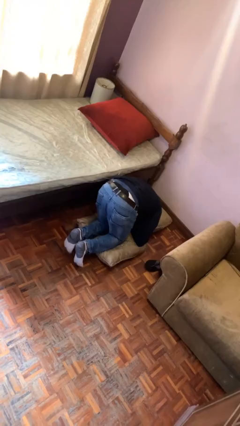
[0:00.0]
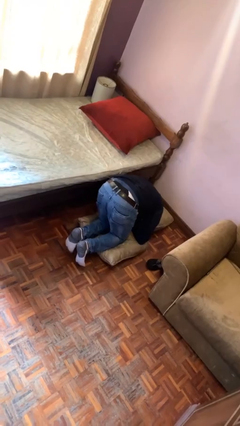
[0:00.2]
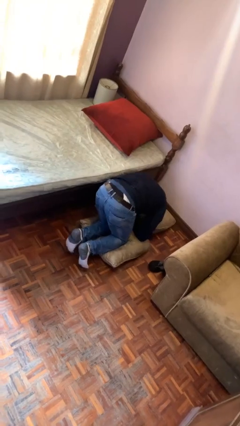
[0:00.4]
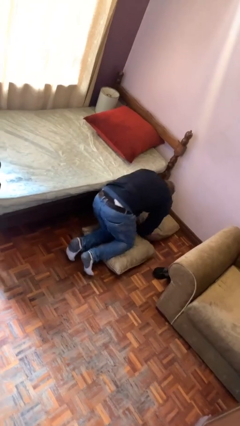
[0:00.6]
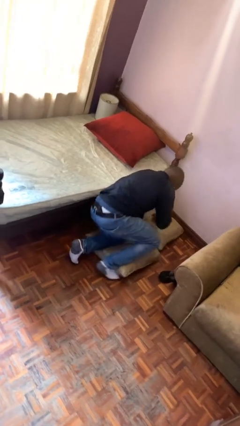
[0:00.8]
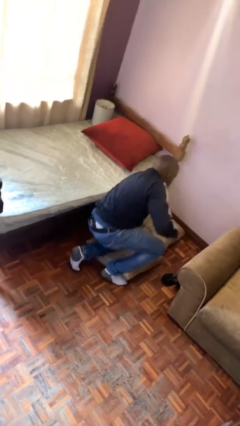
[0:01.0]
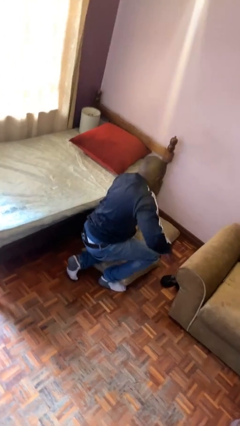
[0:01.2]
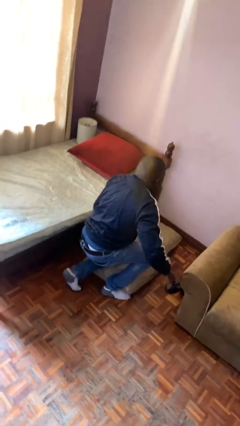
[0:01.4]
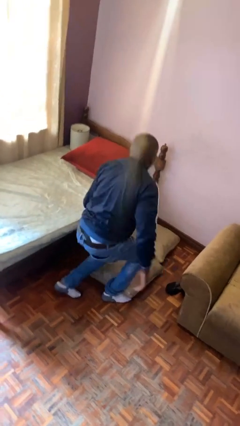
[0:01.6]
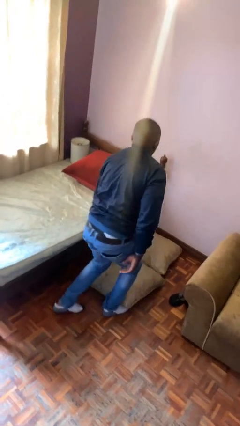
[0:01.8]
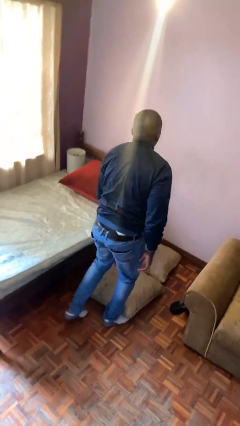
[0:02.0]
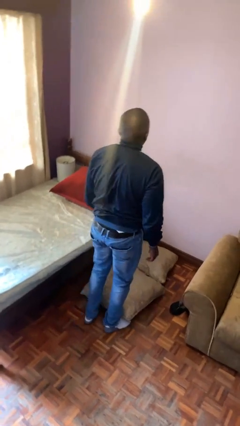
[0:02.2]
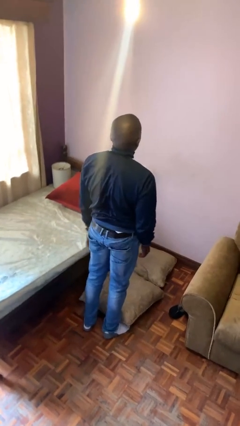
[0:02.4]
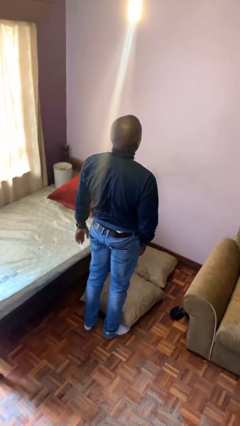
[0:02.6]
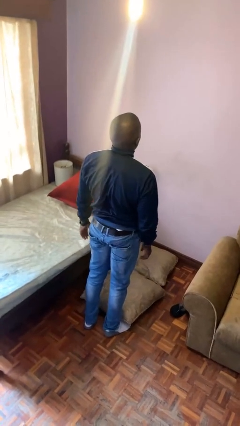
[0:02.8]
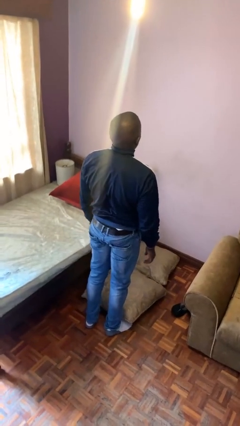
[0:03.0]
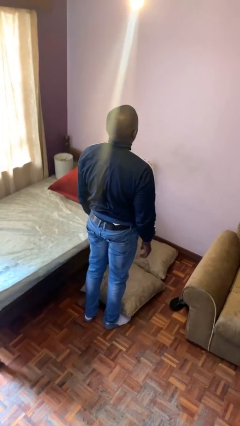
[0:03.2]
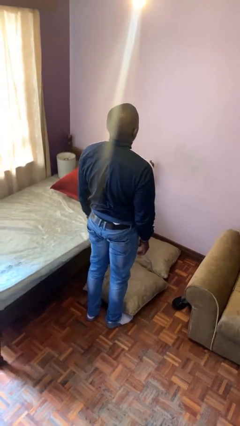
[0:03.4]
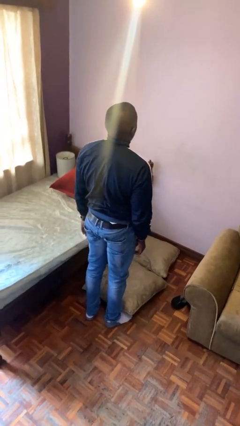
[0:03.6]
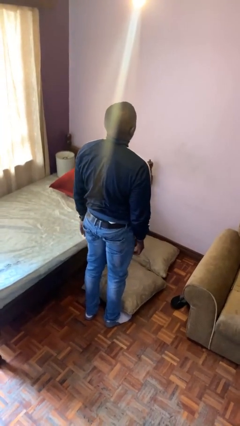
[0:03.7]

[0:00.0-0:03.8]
person stands up from floor

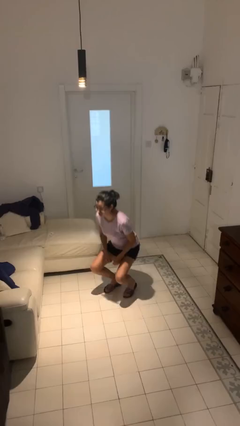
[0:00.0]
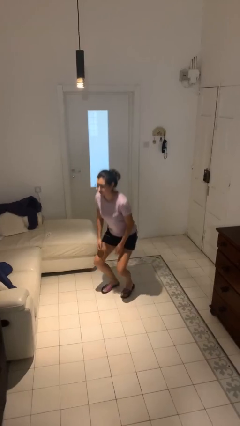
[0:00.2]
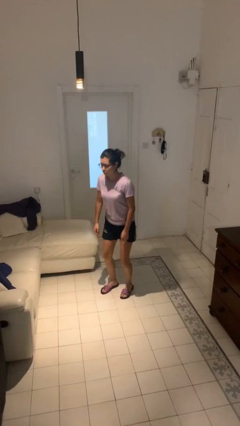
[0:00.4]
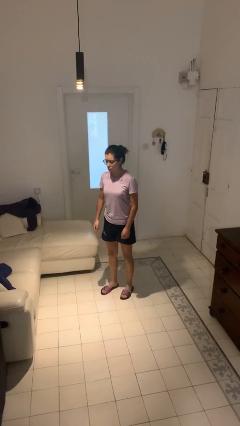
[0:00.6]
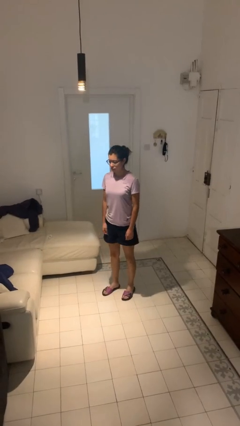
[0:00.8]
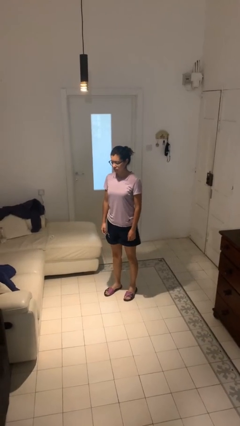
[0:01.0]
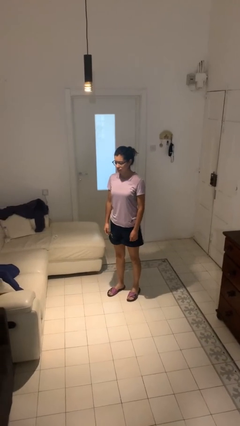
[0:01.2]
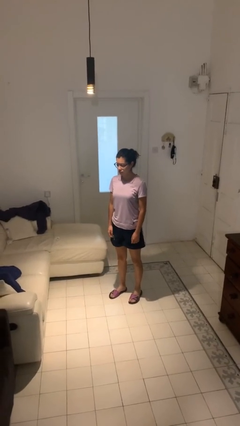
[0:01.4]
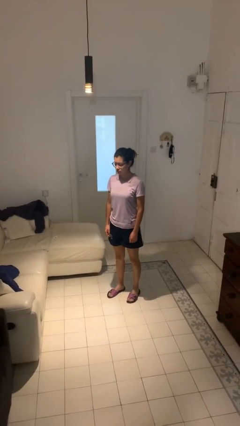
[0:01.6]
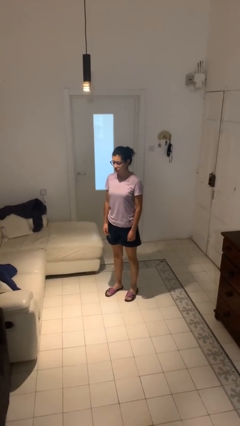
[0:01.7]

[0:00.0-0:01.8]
person stands up

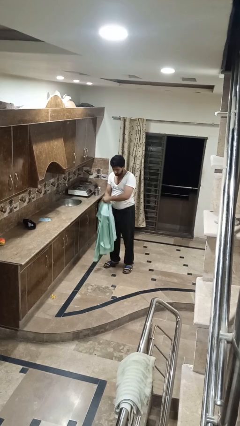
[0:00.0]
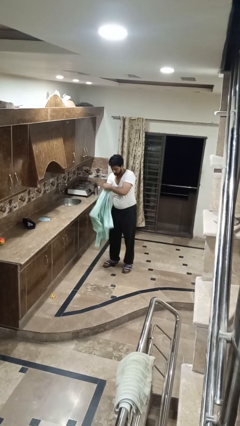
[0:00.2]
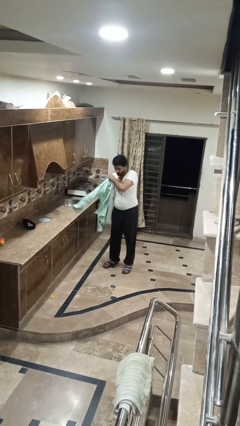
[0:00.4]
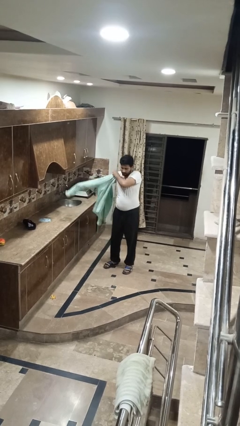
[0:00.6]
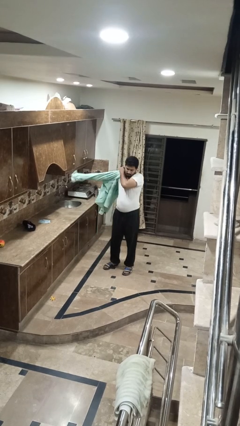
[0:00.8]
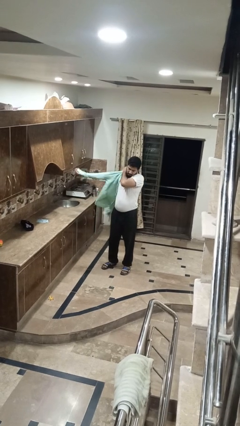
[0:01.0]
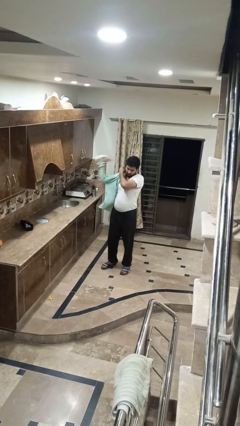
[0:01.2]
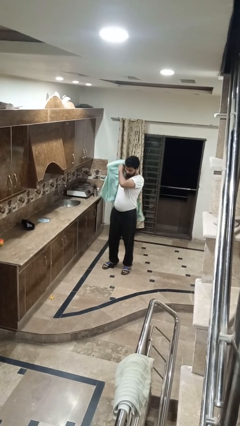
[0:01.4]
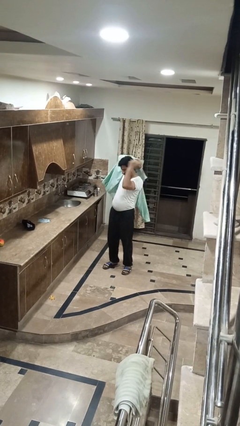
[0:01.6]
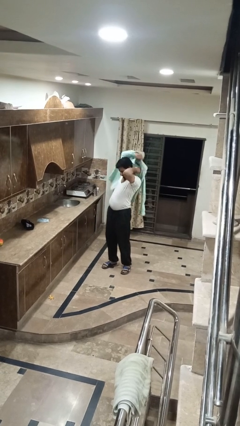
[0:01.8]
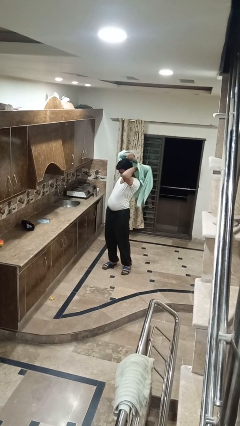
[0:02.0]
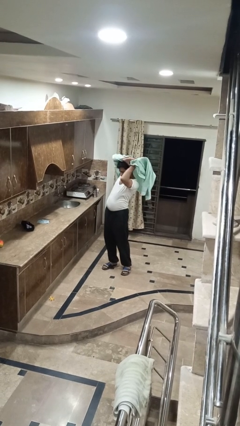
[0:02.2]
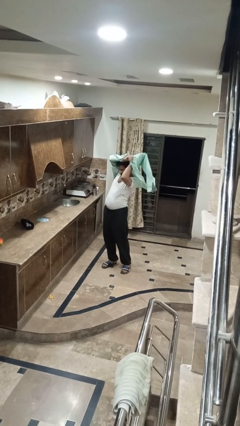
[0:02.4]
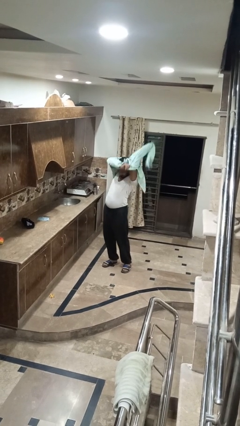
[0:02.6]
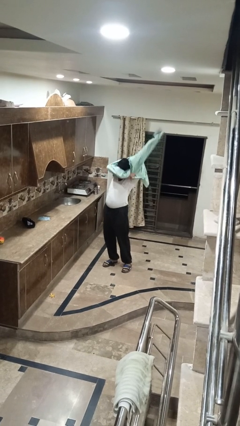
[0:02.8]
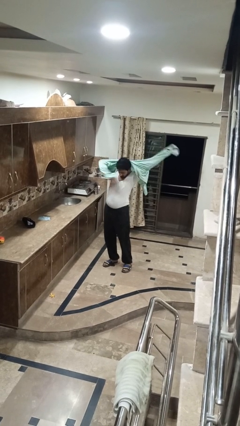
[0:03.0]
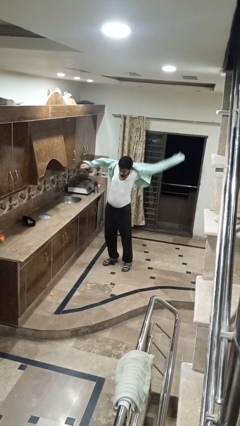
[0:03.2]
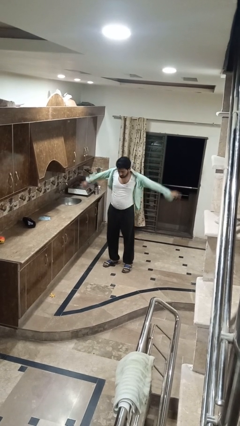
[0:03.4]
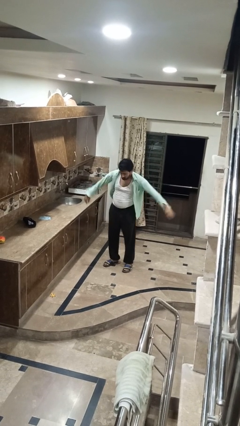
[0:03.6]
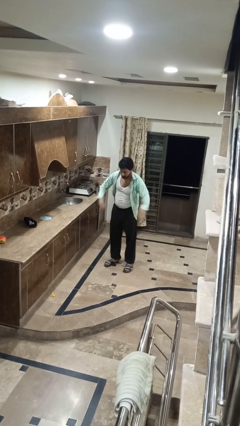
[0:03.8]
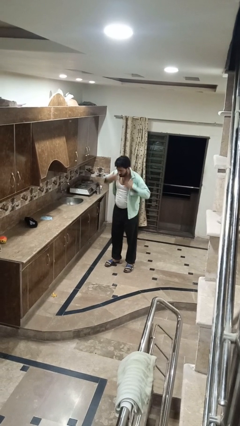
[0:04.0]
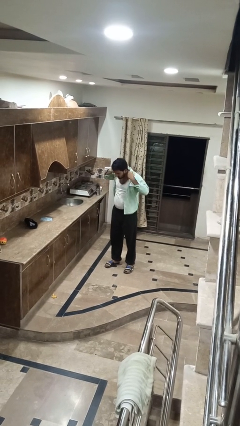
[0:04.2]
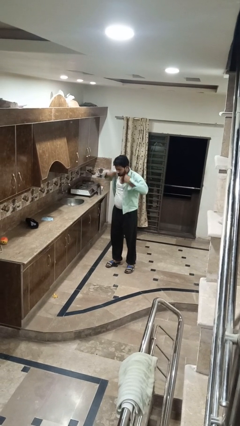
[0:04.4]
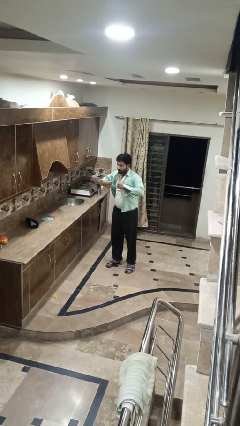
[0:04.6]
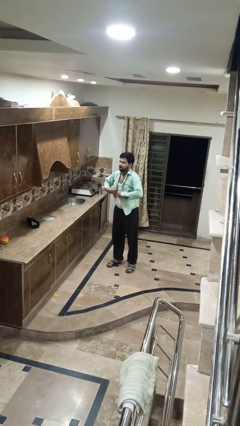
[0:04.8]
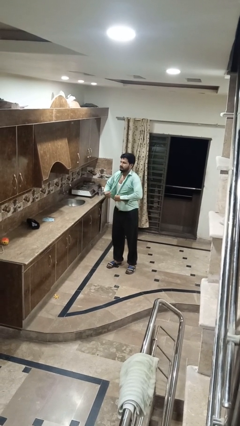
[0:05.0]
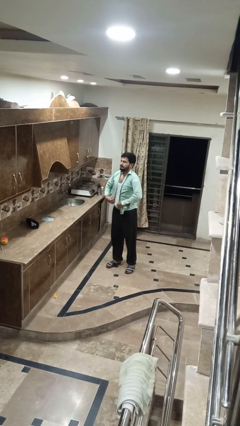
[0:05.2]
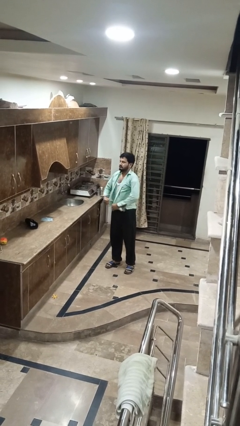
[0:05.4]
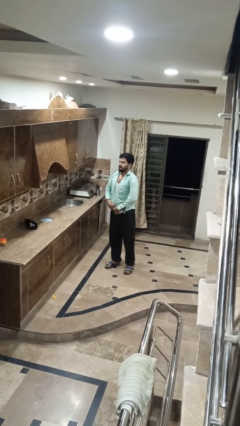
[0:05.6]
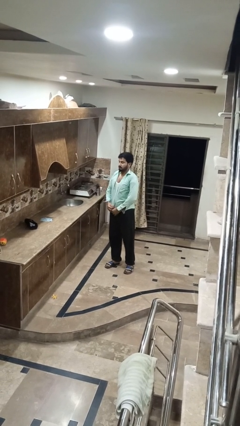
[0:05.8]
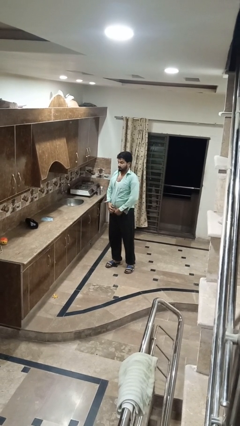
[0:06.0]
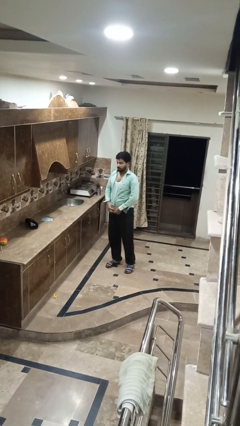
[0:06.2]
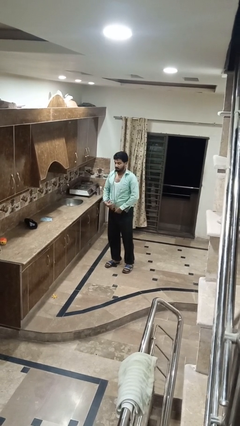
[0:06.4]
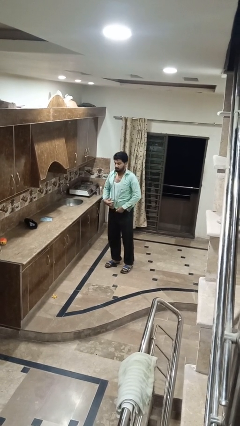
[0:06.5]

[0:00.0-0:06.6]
person puts on shirt

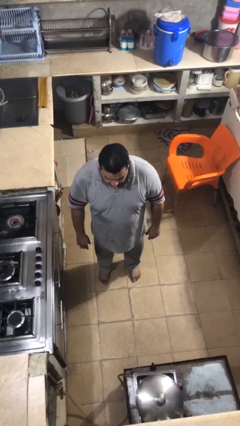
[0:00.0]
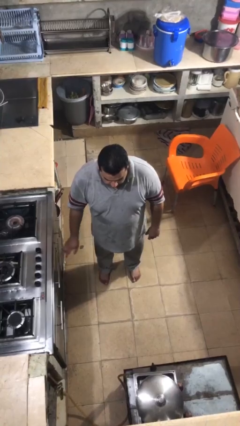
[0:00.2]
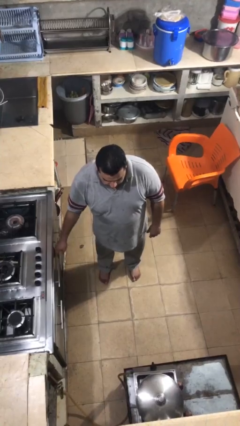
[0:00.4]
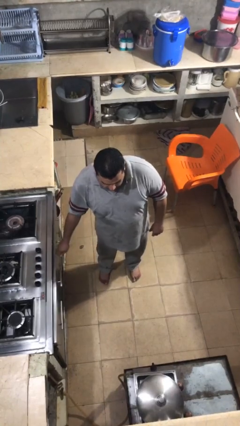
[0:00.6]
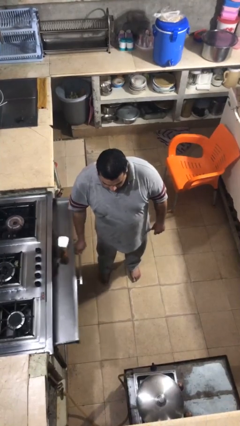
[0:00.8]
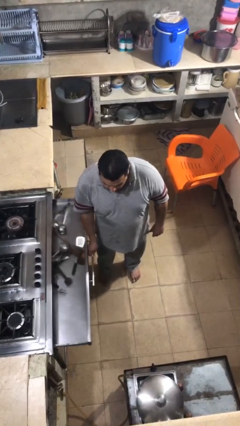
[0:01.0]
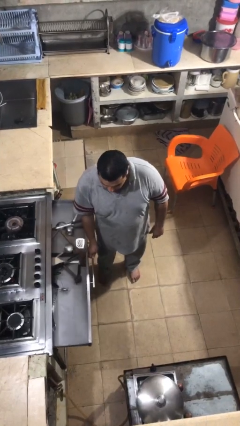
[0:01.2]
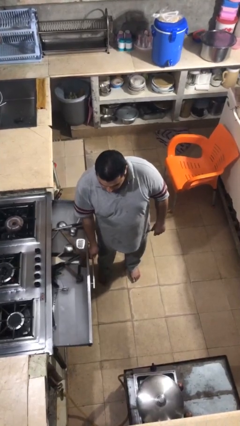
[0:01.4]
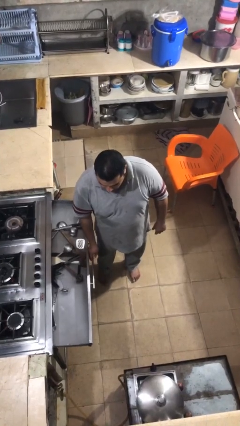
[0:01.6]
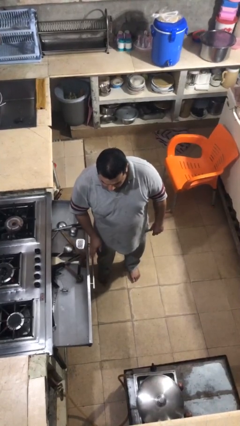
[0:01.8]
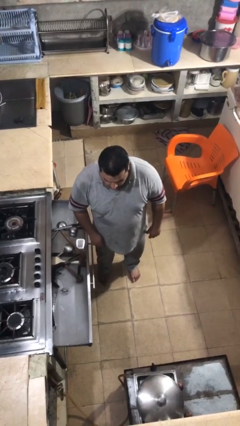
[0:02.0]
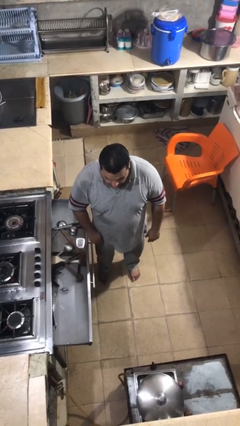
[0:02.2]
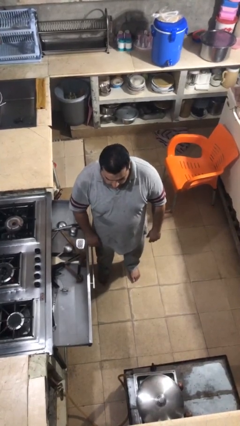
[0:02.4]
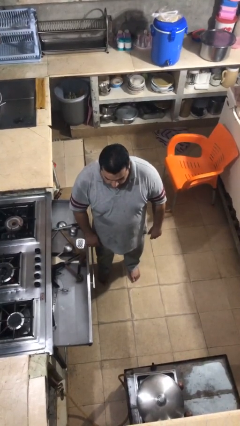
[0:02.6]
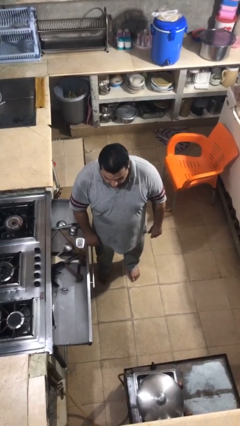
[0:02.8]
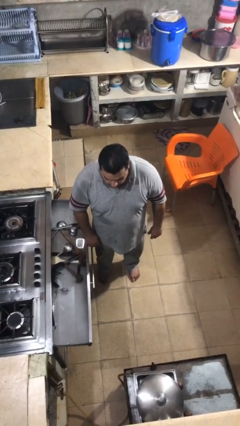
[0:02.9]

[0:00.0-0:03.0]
person opens kitchen drawer

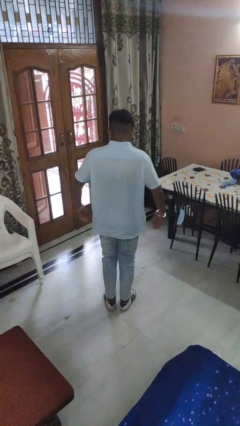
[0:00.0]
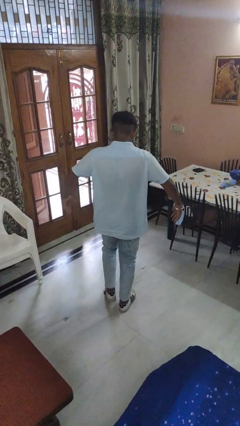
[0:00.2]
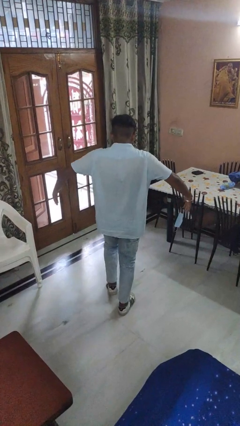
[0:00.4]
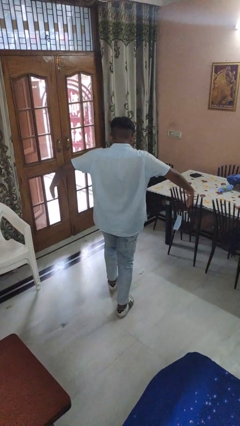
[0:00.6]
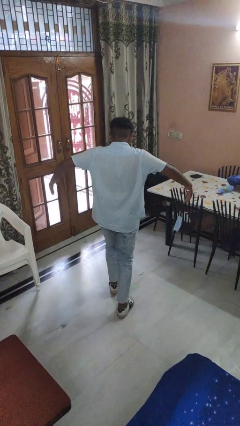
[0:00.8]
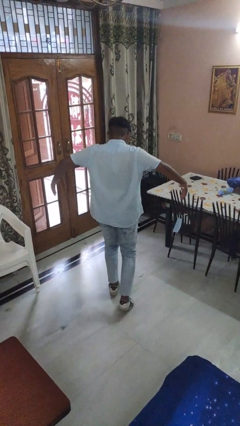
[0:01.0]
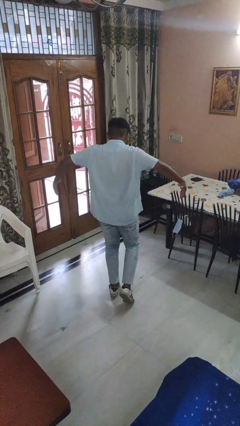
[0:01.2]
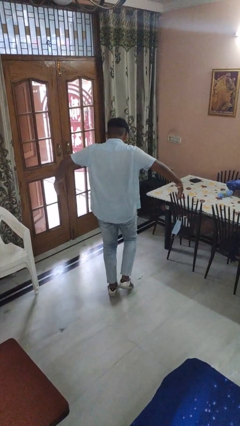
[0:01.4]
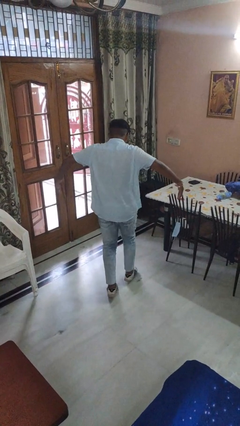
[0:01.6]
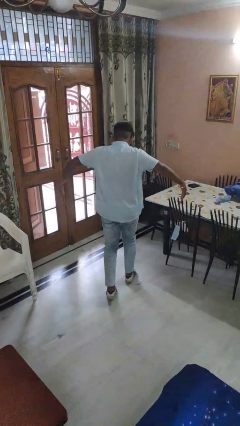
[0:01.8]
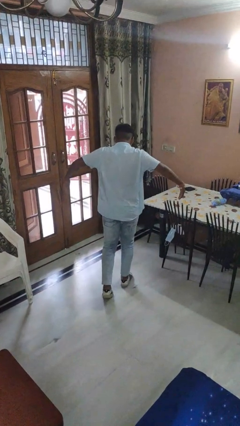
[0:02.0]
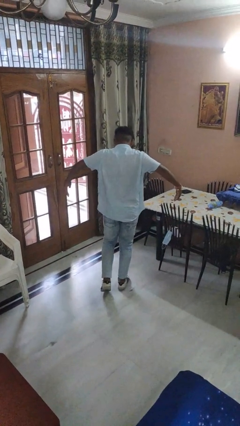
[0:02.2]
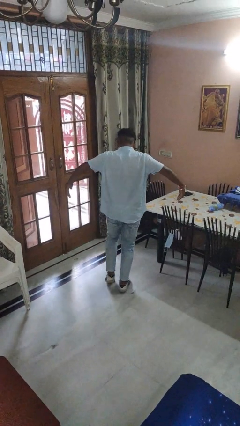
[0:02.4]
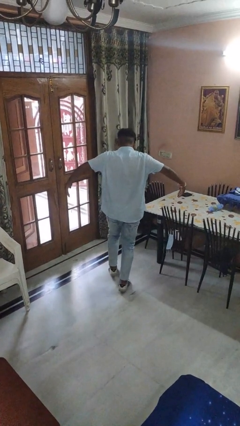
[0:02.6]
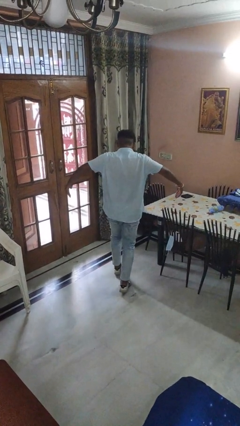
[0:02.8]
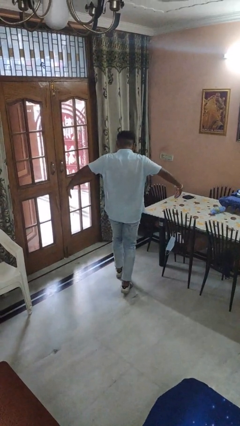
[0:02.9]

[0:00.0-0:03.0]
person walks tiptoe
